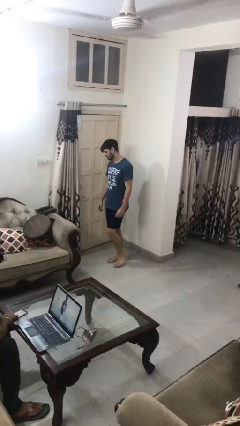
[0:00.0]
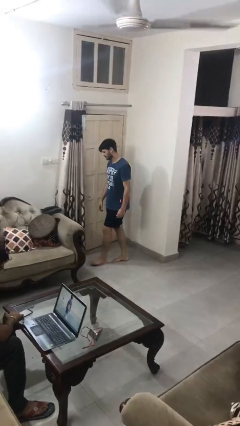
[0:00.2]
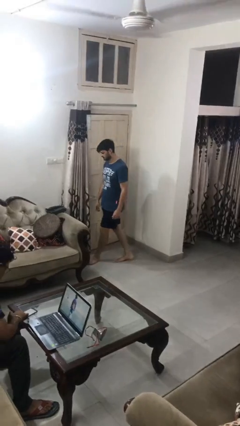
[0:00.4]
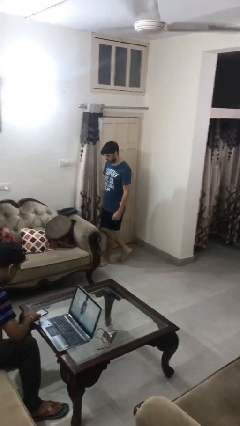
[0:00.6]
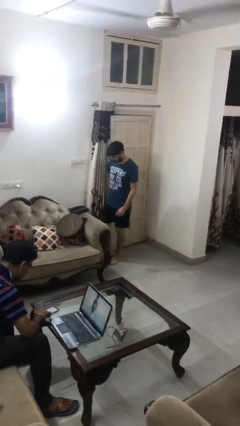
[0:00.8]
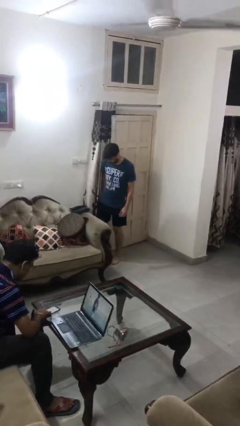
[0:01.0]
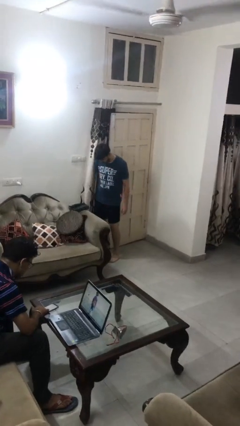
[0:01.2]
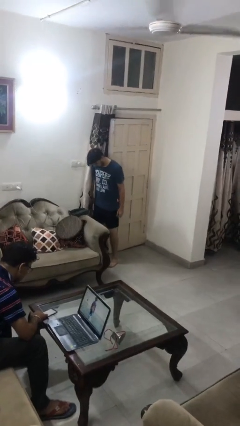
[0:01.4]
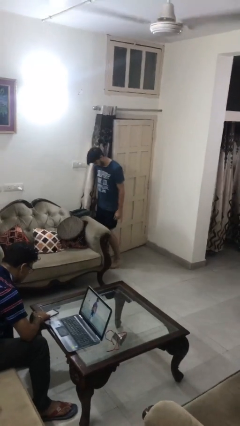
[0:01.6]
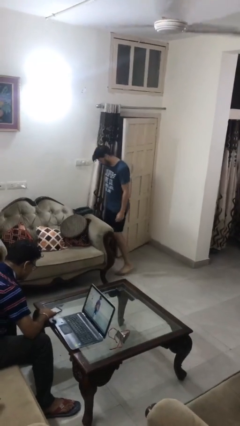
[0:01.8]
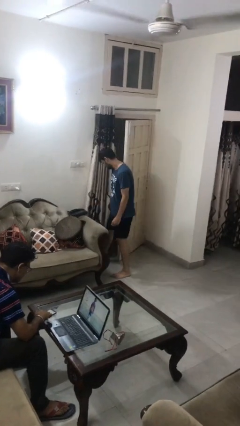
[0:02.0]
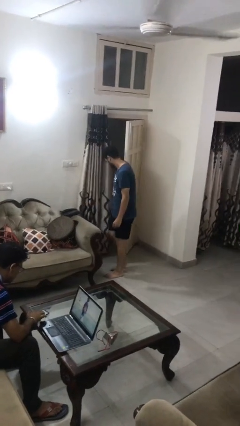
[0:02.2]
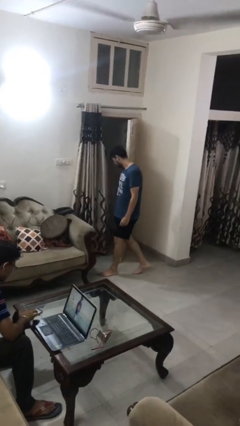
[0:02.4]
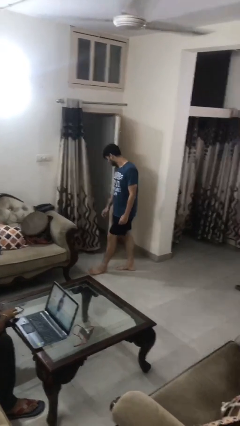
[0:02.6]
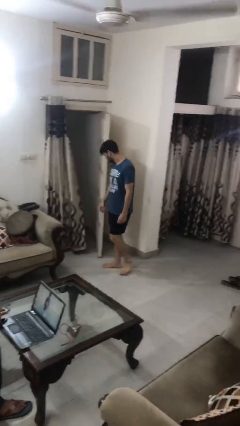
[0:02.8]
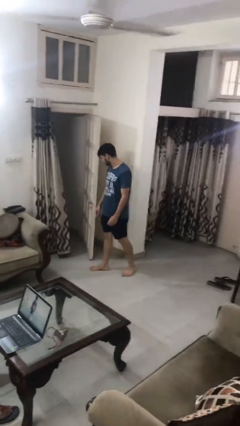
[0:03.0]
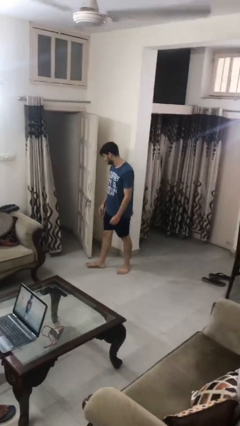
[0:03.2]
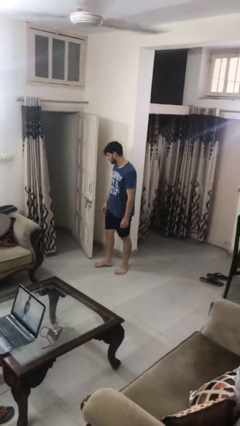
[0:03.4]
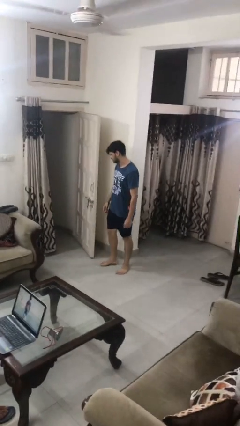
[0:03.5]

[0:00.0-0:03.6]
person opens facility door

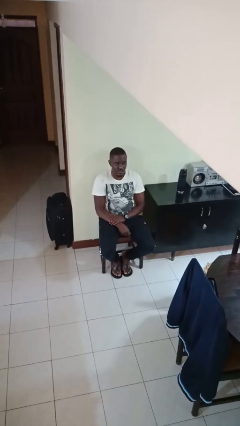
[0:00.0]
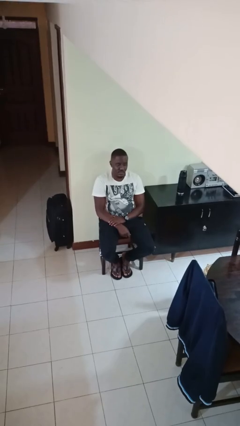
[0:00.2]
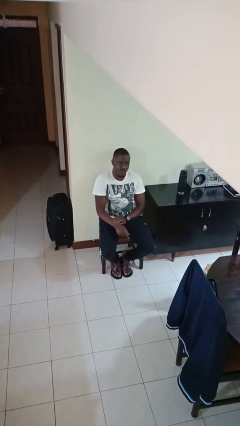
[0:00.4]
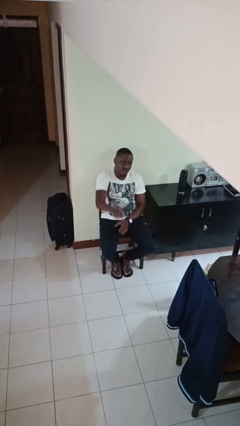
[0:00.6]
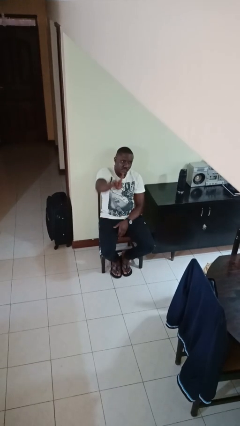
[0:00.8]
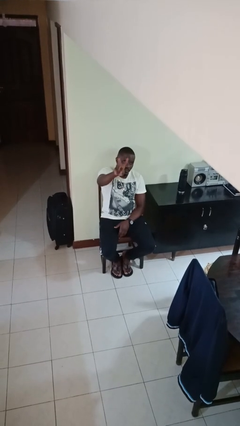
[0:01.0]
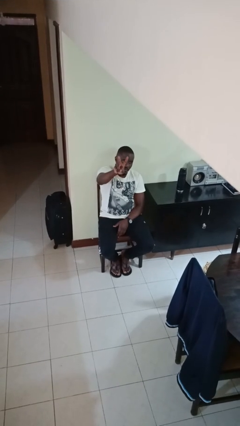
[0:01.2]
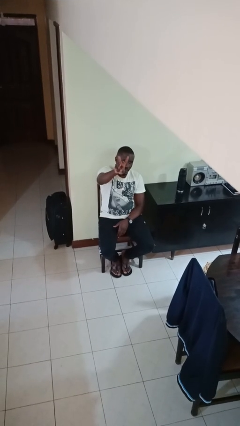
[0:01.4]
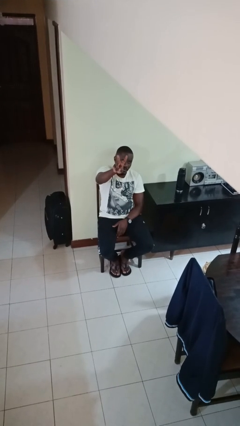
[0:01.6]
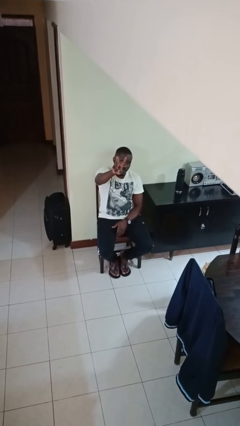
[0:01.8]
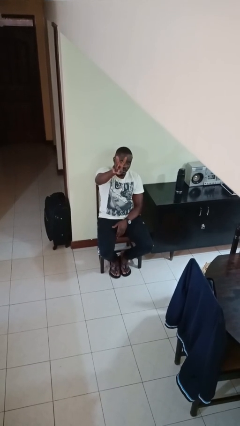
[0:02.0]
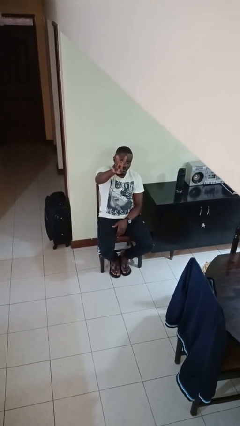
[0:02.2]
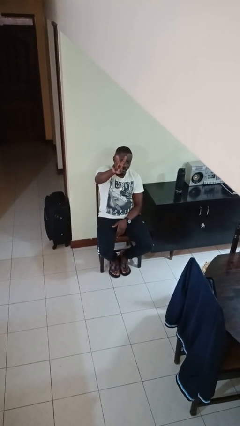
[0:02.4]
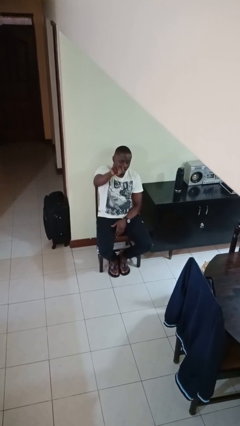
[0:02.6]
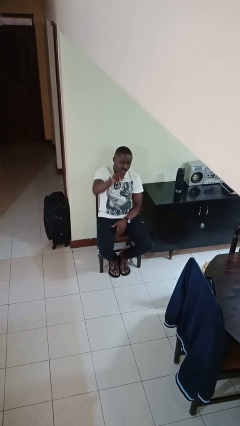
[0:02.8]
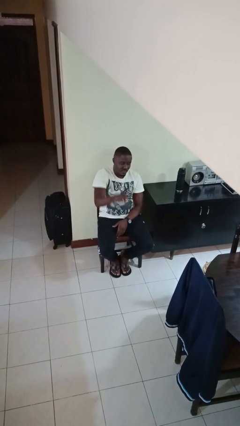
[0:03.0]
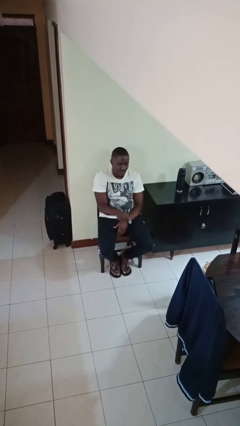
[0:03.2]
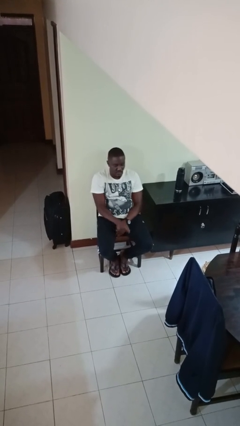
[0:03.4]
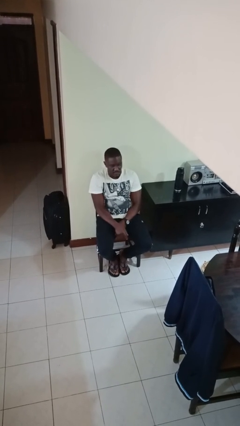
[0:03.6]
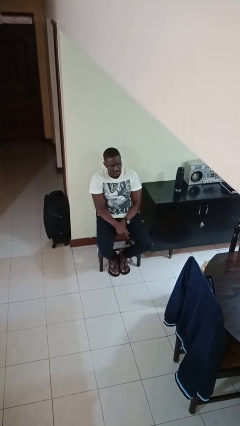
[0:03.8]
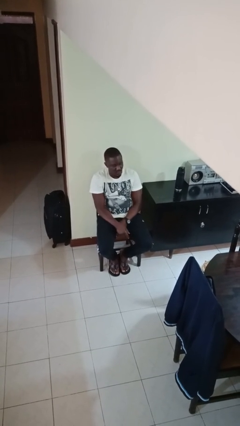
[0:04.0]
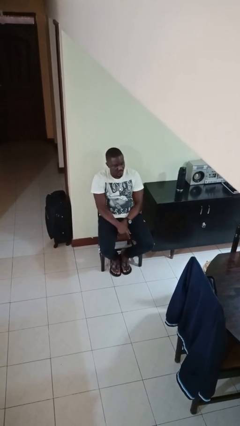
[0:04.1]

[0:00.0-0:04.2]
person gestures peace

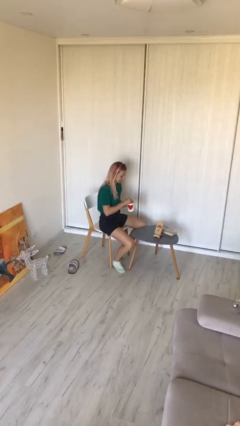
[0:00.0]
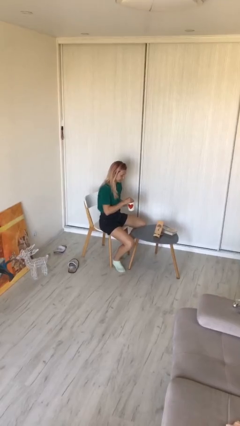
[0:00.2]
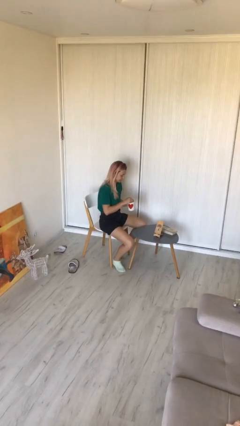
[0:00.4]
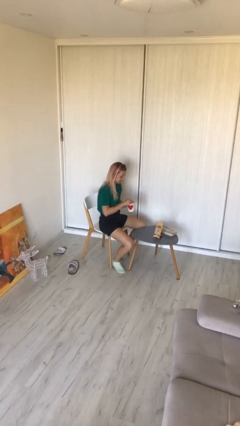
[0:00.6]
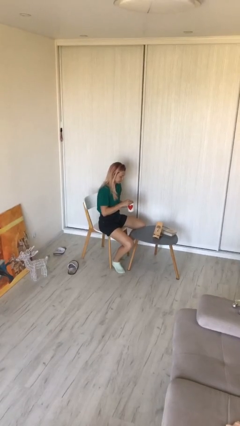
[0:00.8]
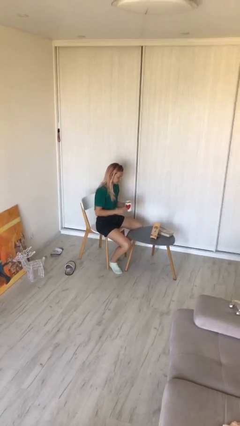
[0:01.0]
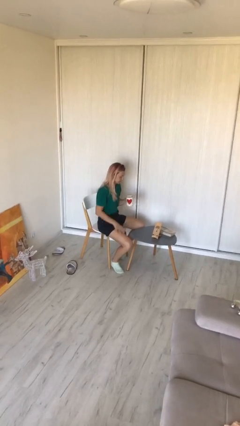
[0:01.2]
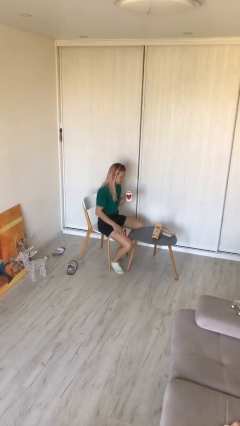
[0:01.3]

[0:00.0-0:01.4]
person stirs mug

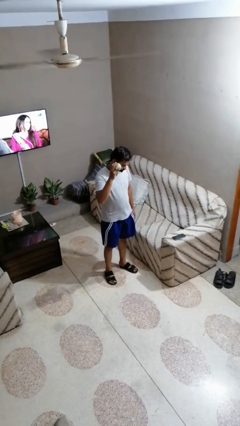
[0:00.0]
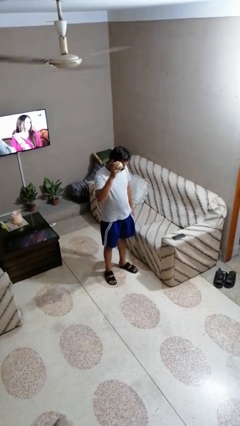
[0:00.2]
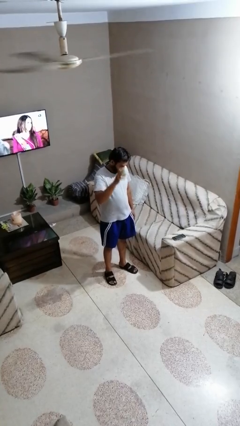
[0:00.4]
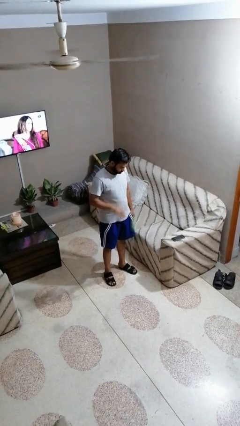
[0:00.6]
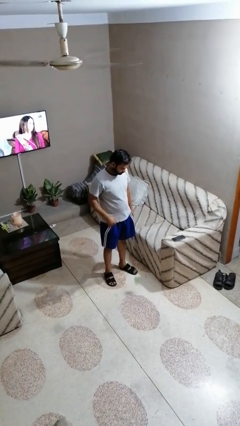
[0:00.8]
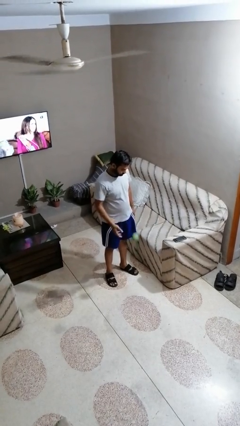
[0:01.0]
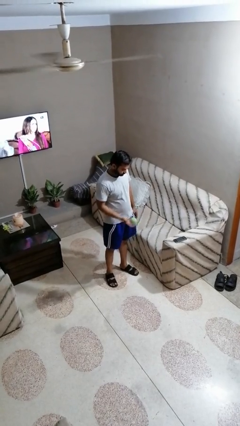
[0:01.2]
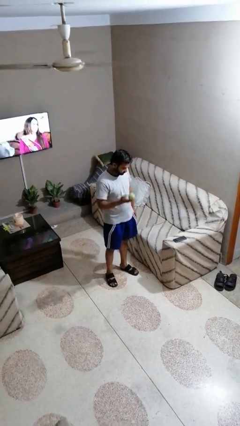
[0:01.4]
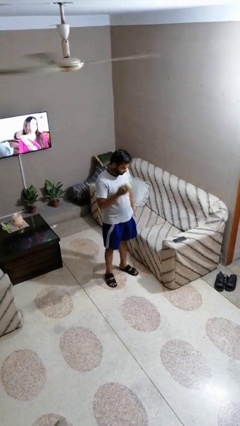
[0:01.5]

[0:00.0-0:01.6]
person bounces ball on floor

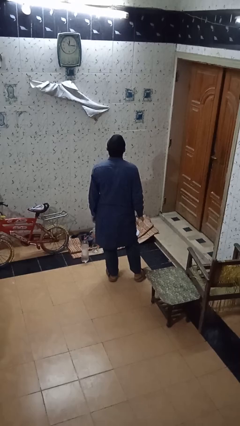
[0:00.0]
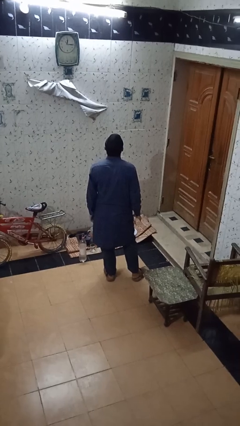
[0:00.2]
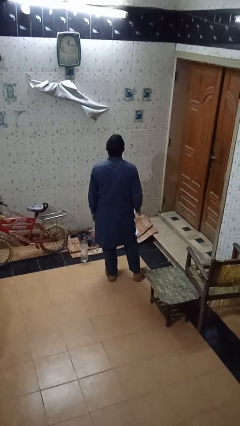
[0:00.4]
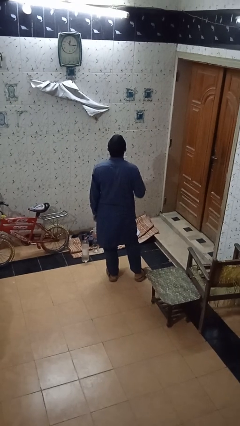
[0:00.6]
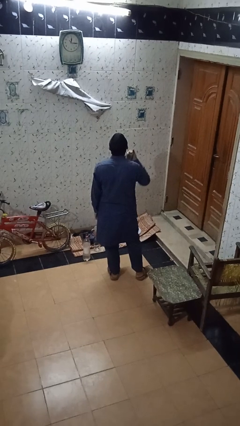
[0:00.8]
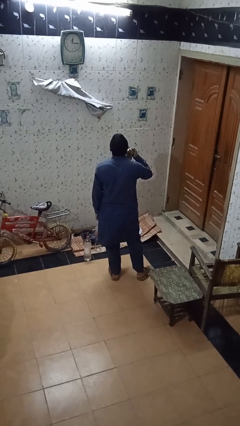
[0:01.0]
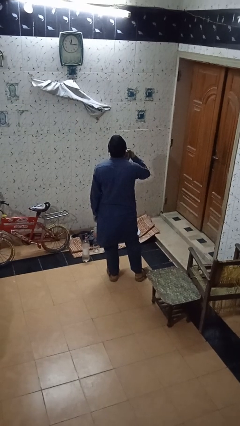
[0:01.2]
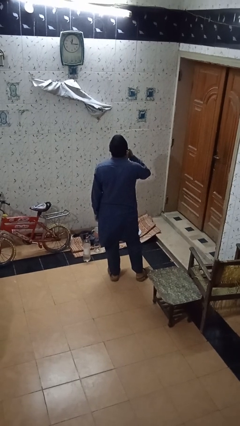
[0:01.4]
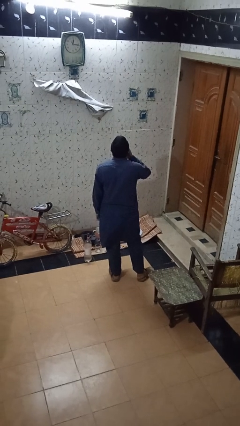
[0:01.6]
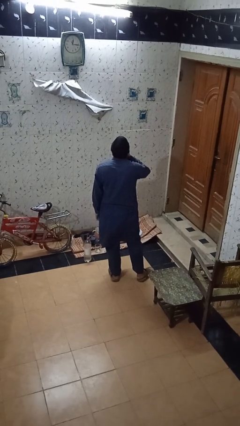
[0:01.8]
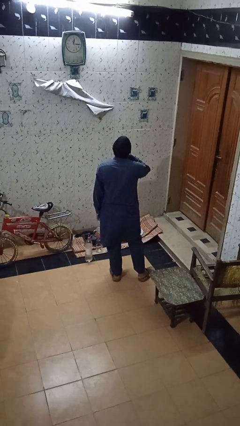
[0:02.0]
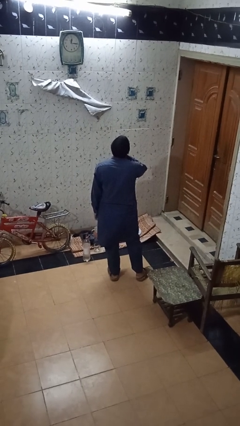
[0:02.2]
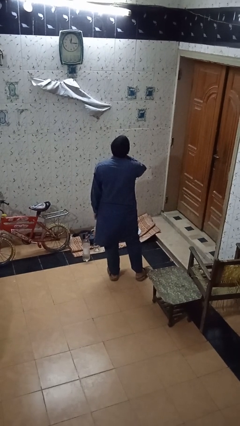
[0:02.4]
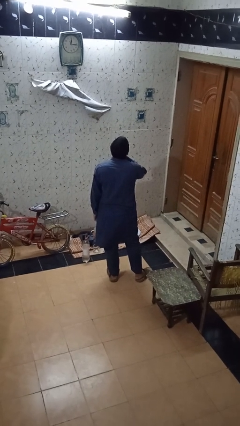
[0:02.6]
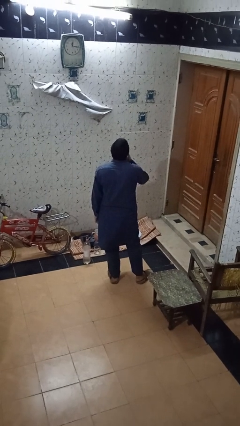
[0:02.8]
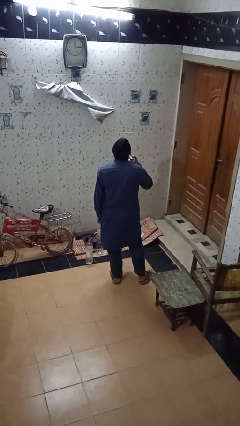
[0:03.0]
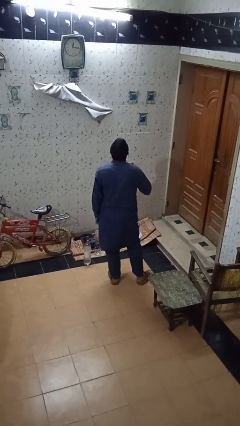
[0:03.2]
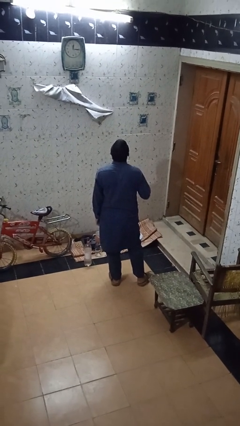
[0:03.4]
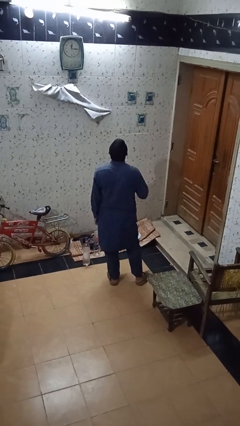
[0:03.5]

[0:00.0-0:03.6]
person applies deodorant

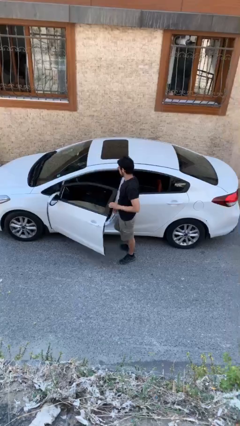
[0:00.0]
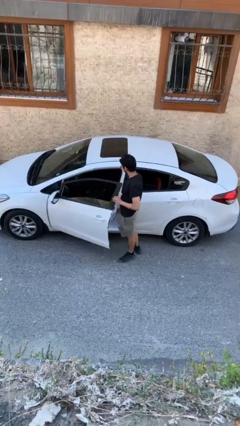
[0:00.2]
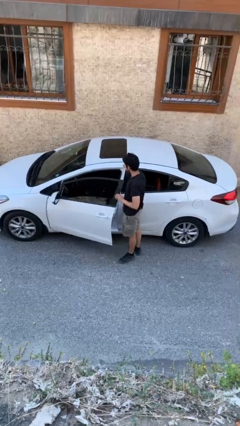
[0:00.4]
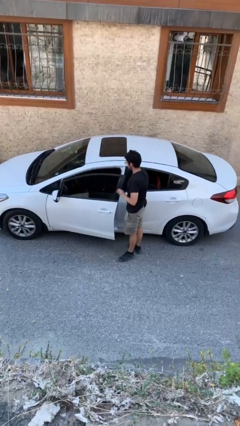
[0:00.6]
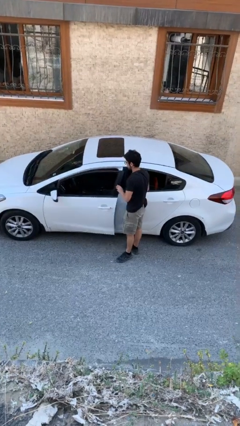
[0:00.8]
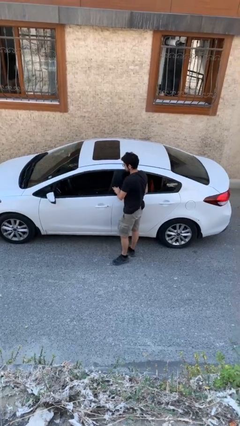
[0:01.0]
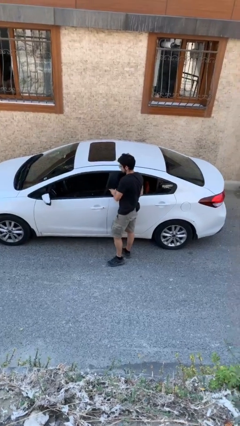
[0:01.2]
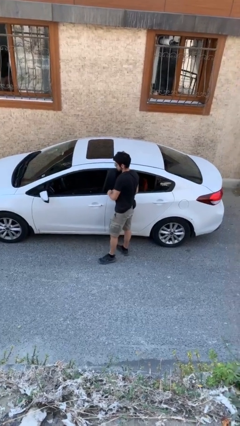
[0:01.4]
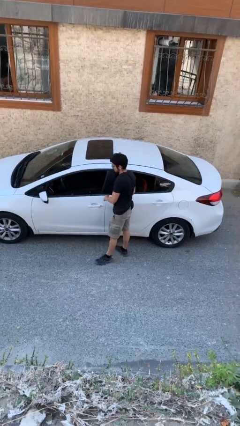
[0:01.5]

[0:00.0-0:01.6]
person closes car door

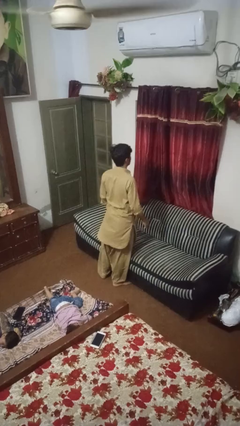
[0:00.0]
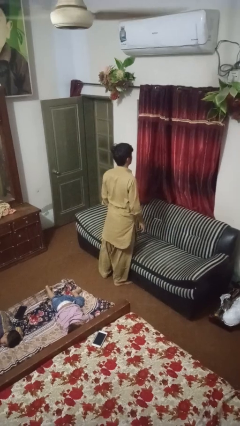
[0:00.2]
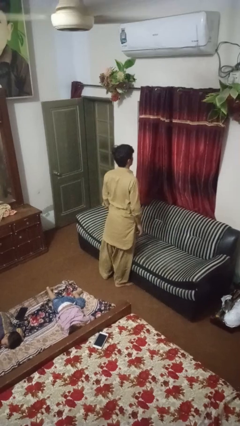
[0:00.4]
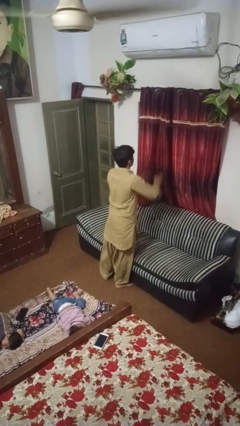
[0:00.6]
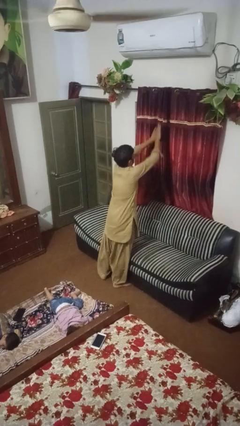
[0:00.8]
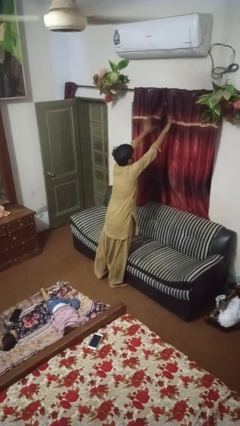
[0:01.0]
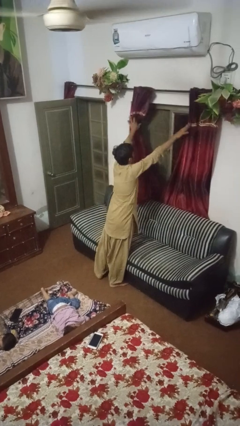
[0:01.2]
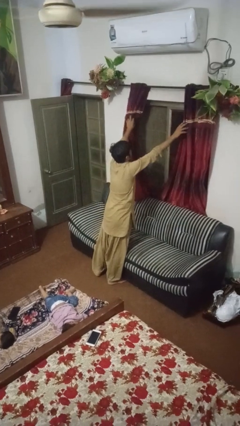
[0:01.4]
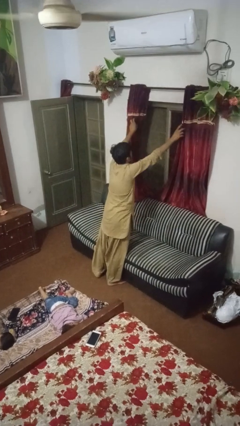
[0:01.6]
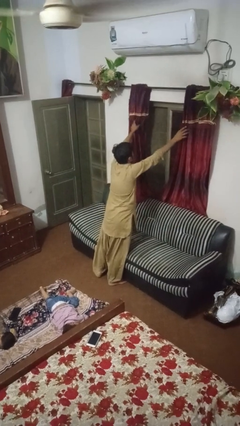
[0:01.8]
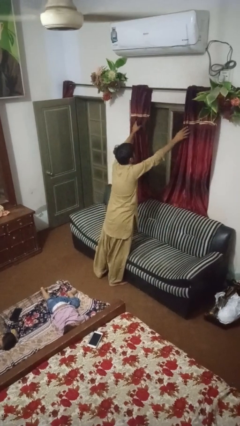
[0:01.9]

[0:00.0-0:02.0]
person opens curtains
